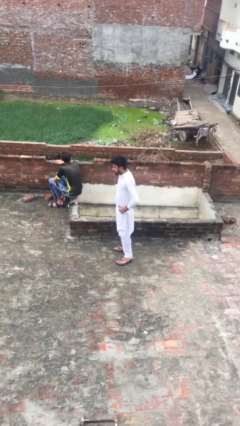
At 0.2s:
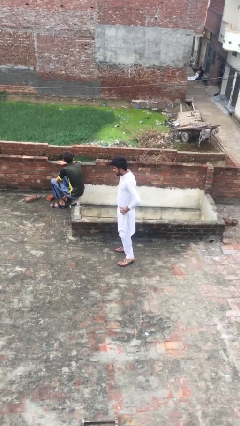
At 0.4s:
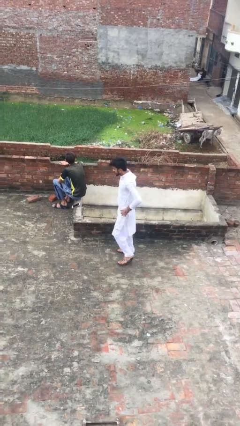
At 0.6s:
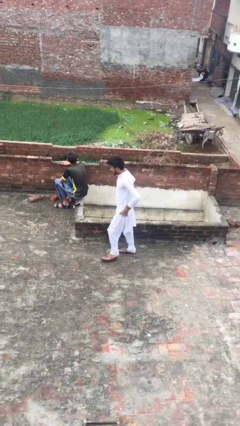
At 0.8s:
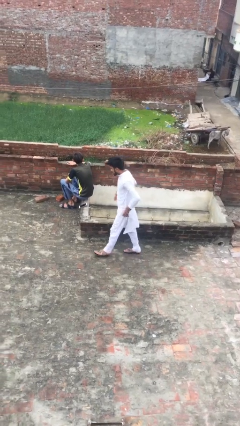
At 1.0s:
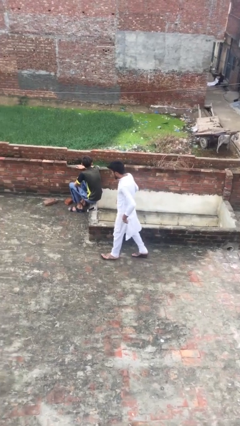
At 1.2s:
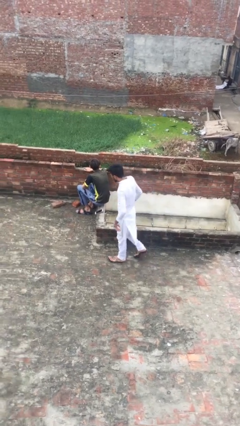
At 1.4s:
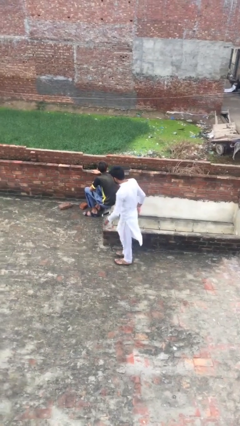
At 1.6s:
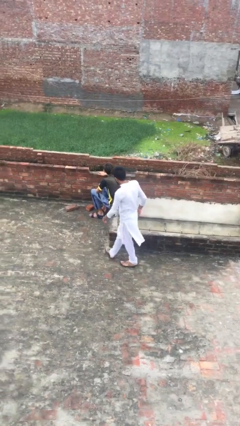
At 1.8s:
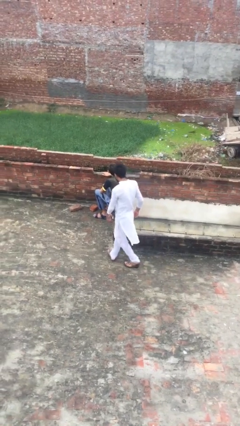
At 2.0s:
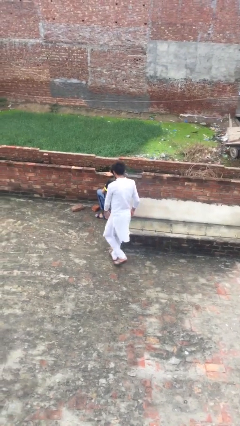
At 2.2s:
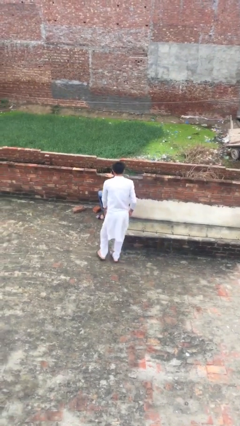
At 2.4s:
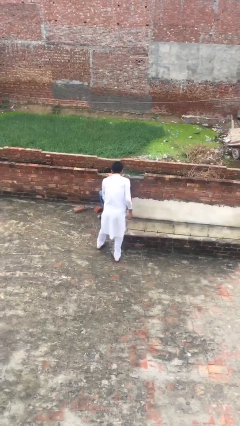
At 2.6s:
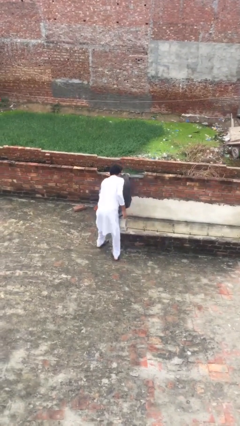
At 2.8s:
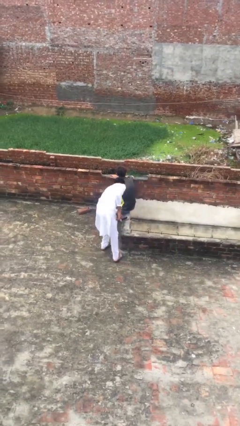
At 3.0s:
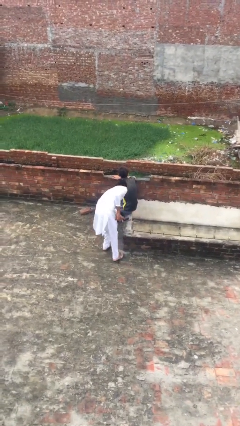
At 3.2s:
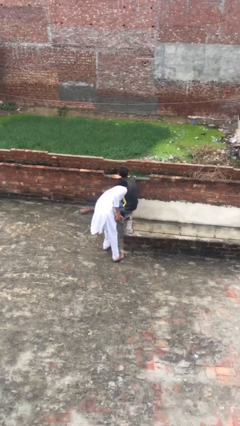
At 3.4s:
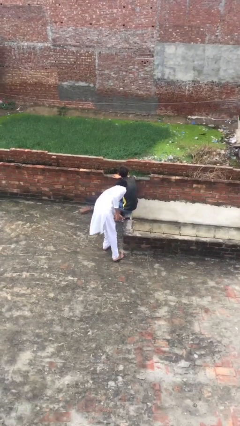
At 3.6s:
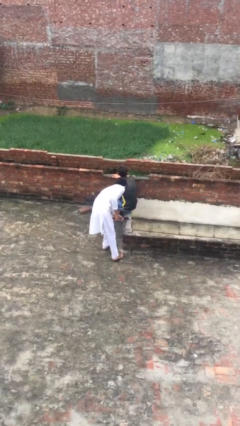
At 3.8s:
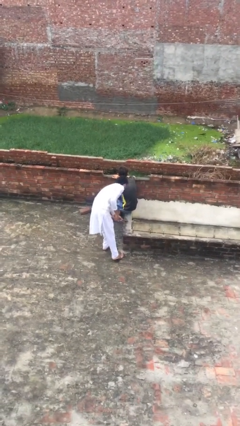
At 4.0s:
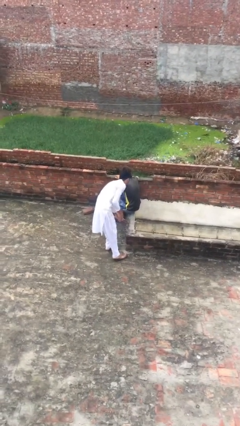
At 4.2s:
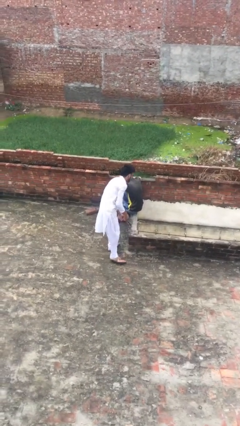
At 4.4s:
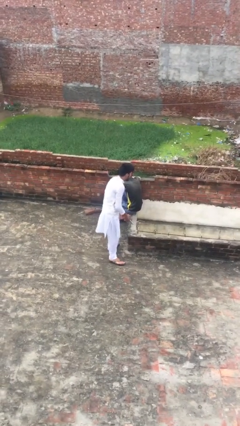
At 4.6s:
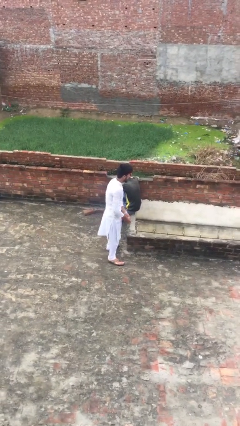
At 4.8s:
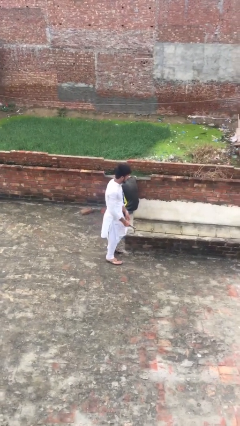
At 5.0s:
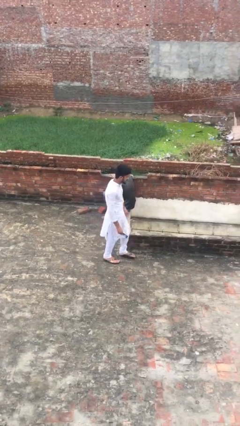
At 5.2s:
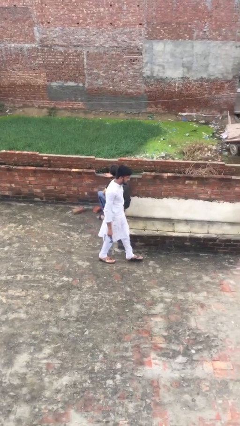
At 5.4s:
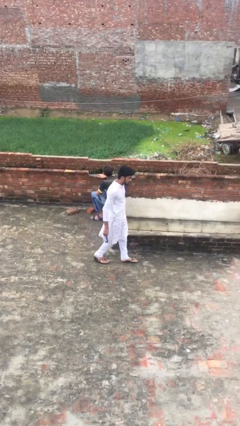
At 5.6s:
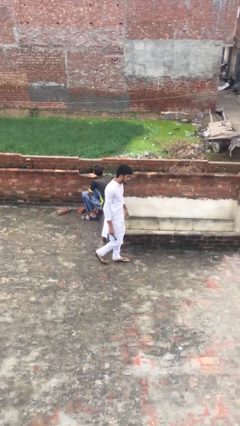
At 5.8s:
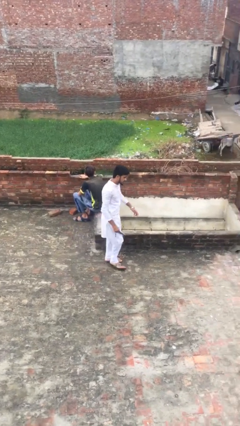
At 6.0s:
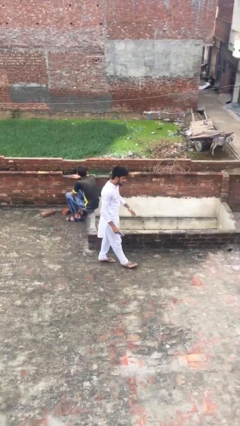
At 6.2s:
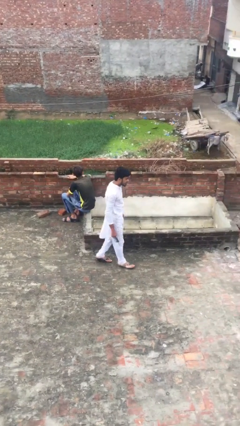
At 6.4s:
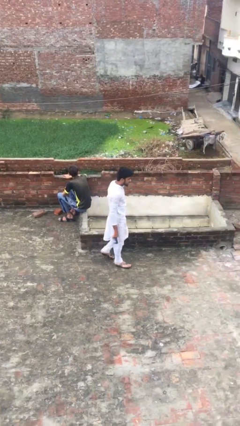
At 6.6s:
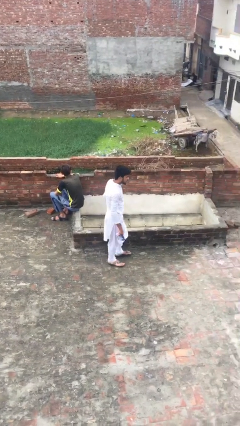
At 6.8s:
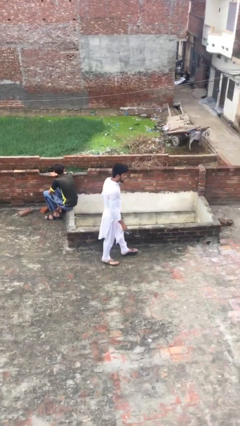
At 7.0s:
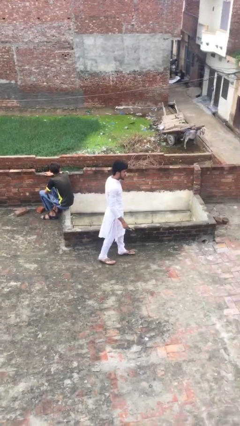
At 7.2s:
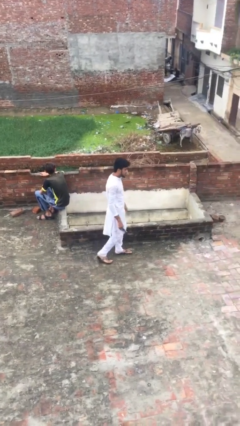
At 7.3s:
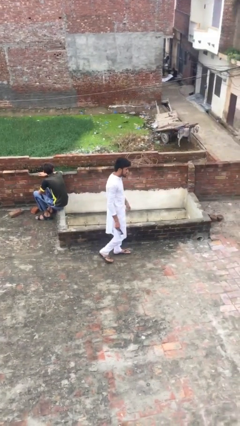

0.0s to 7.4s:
person steals object from person

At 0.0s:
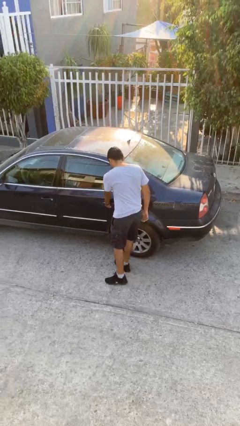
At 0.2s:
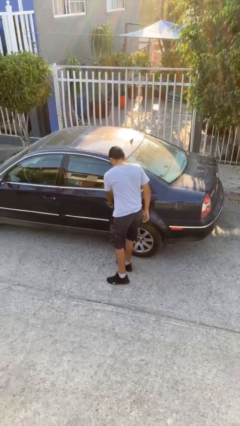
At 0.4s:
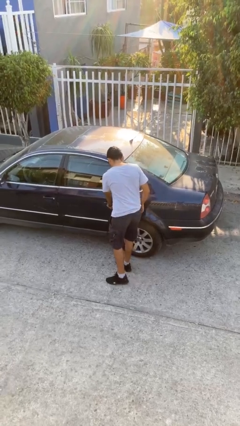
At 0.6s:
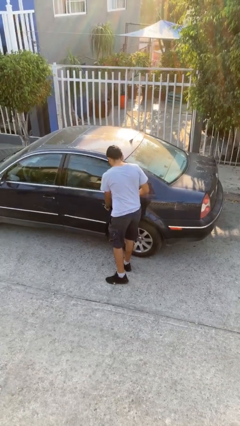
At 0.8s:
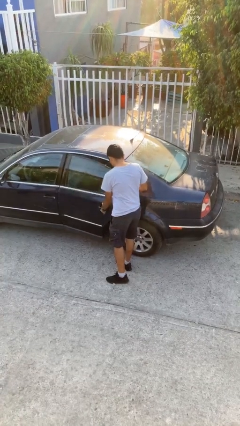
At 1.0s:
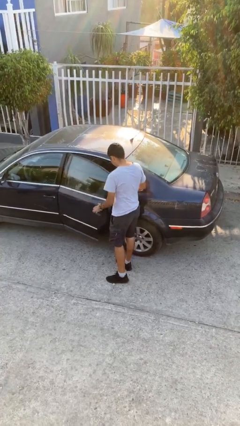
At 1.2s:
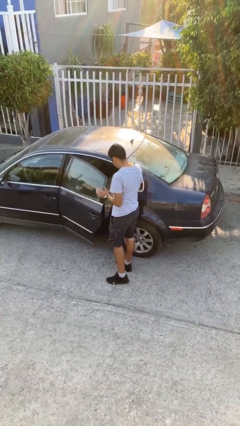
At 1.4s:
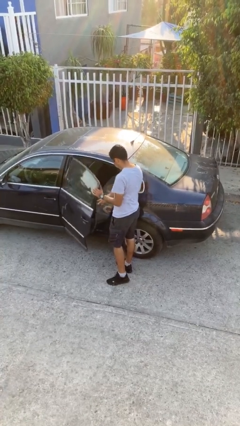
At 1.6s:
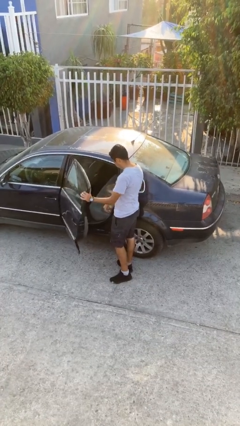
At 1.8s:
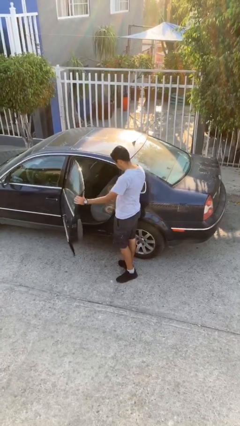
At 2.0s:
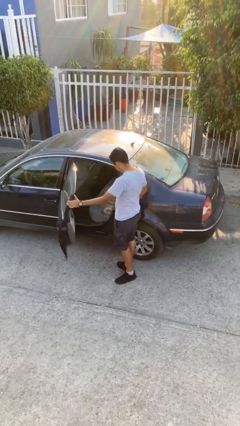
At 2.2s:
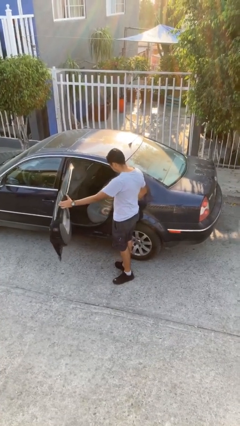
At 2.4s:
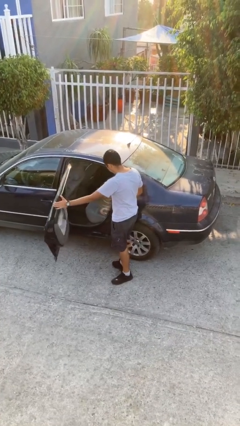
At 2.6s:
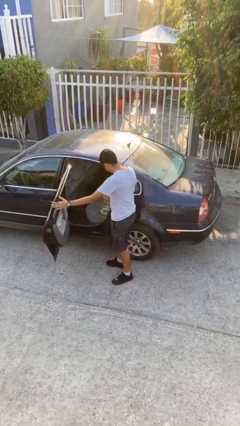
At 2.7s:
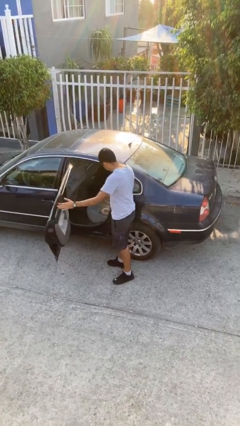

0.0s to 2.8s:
person opens car door

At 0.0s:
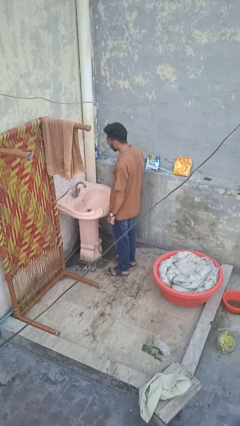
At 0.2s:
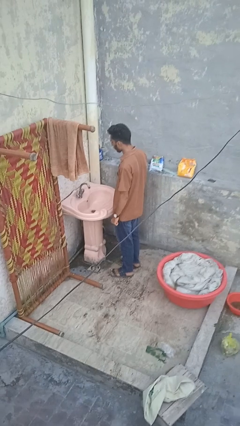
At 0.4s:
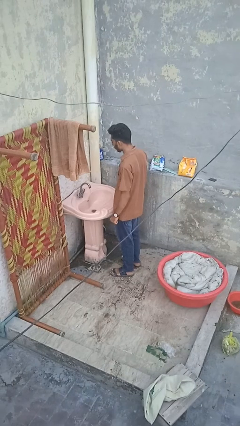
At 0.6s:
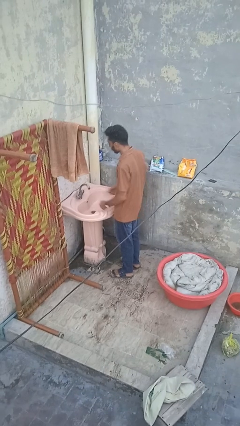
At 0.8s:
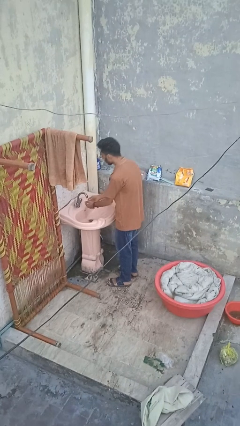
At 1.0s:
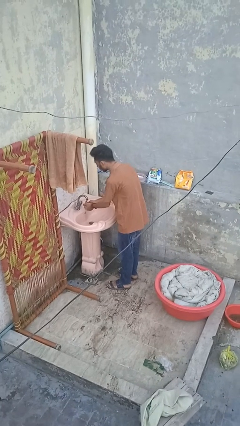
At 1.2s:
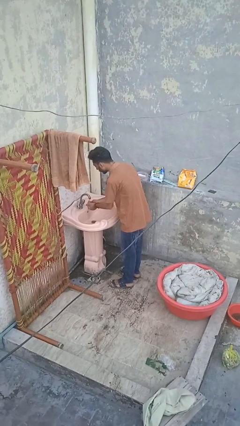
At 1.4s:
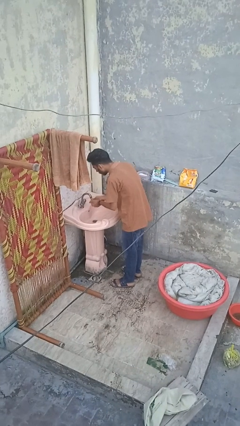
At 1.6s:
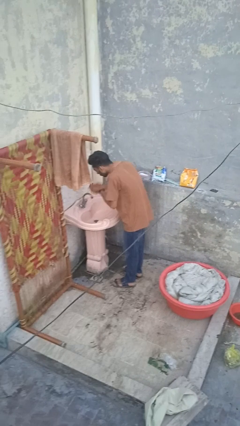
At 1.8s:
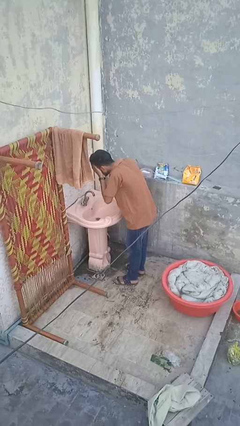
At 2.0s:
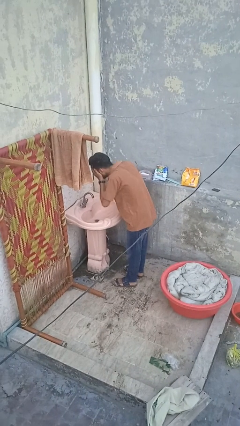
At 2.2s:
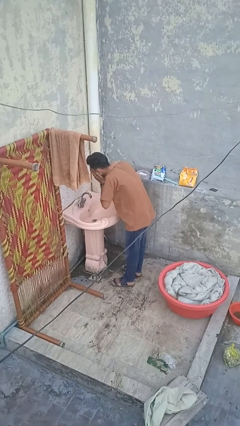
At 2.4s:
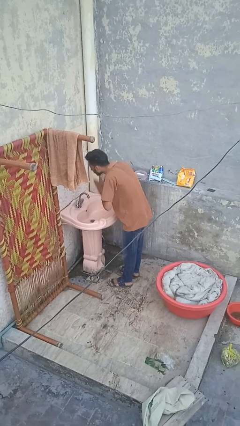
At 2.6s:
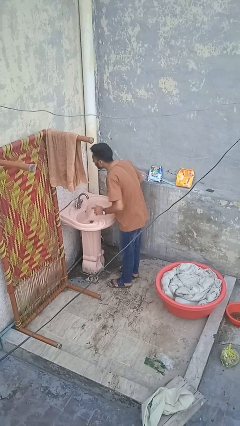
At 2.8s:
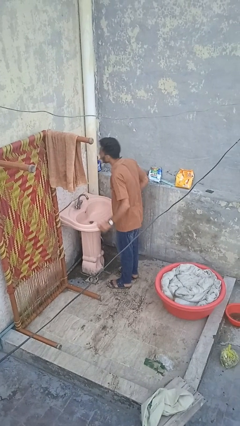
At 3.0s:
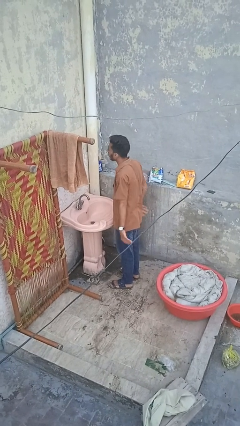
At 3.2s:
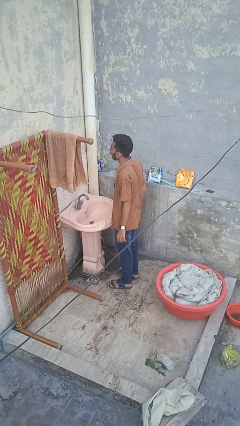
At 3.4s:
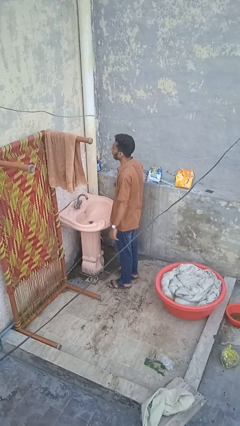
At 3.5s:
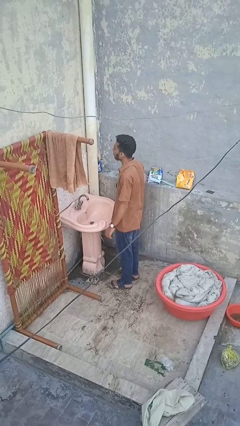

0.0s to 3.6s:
person washes face

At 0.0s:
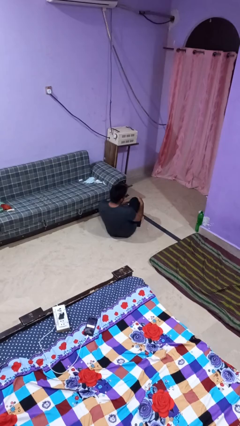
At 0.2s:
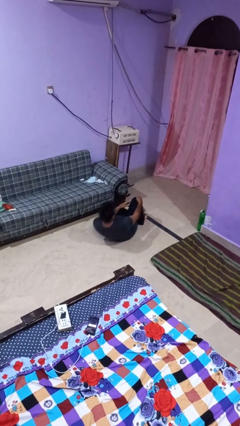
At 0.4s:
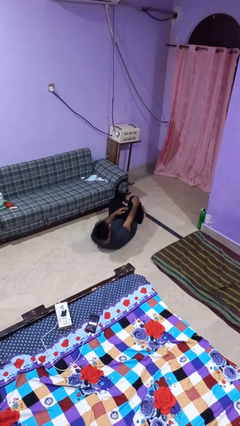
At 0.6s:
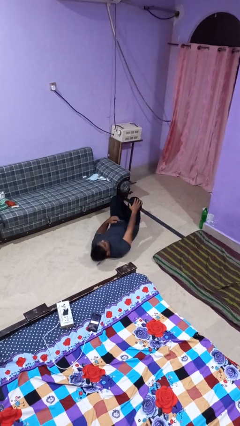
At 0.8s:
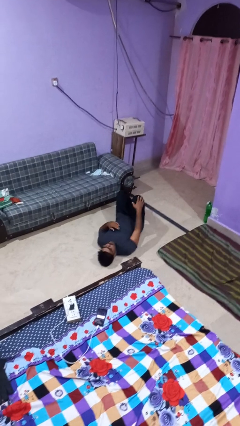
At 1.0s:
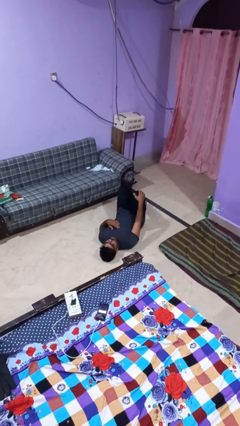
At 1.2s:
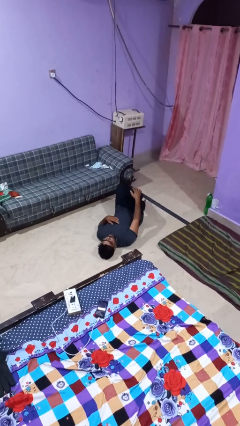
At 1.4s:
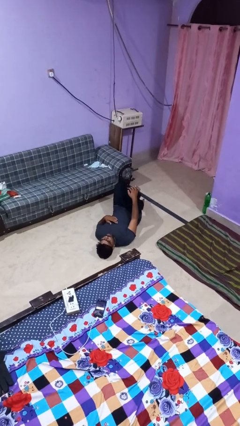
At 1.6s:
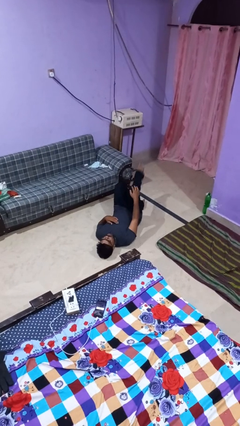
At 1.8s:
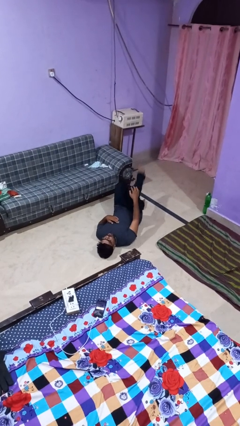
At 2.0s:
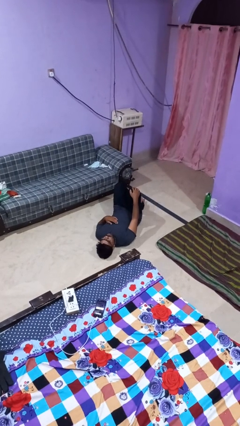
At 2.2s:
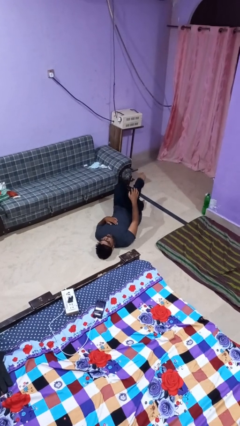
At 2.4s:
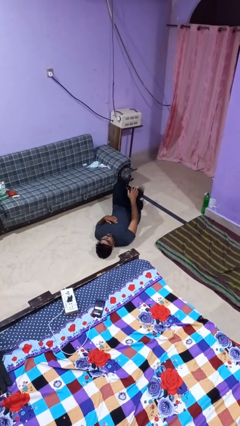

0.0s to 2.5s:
person lies down on floor

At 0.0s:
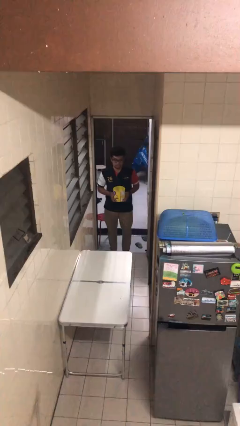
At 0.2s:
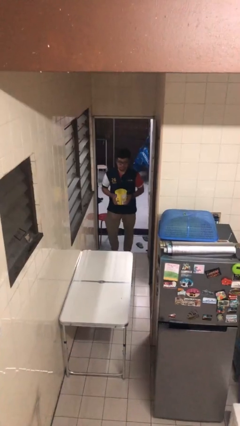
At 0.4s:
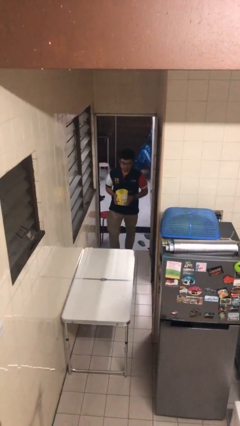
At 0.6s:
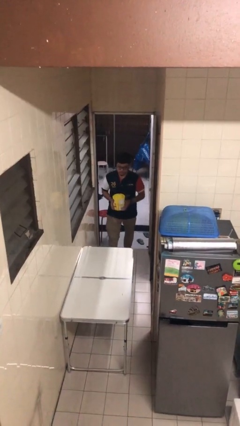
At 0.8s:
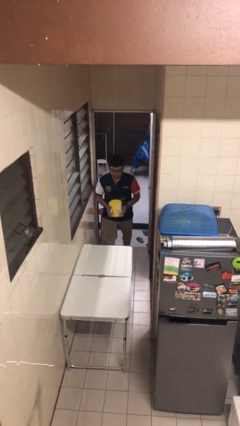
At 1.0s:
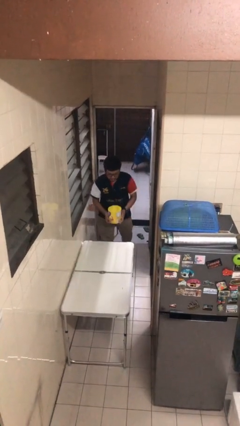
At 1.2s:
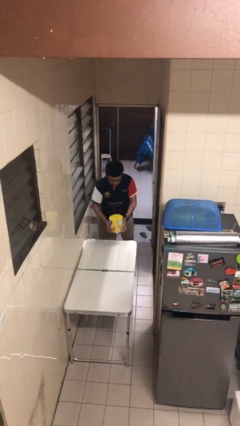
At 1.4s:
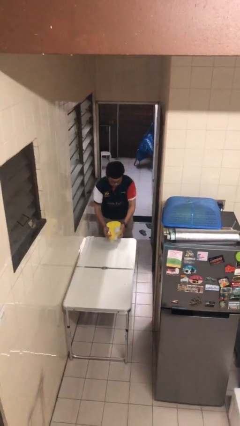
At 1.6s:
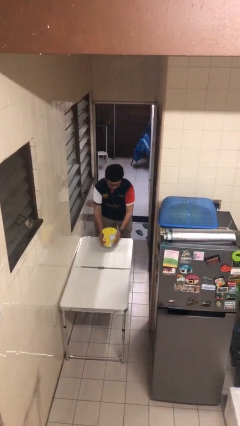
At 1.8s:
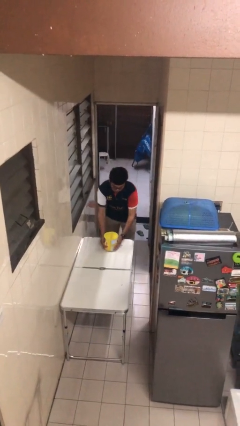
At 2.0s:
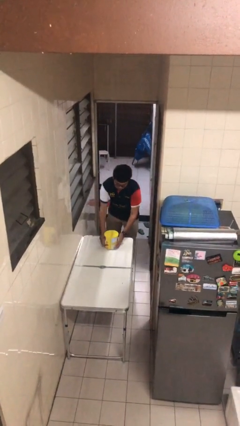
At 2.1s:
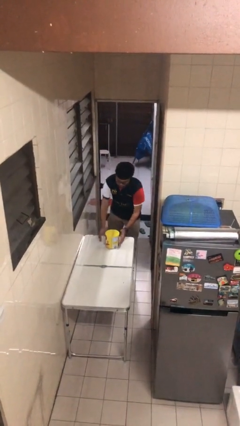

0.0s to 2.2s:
person puts down object on table
